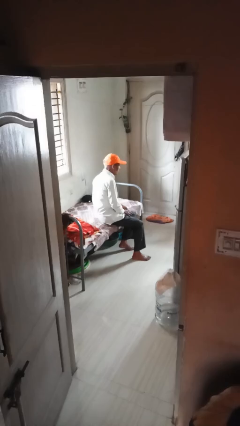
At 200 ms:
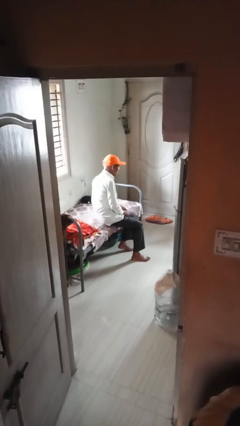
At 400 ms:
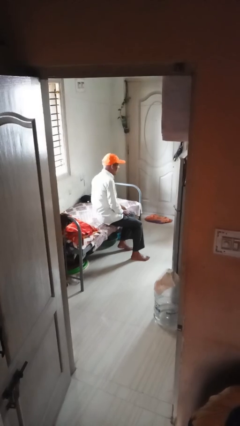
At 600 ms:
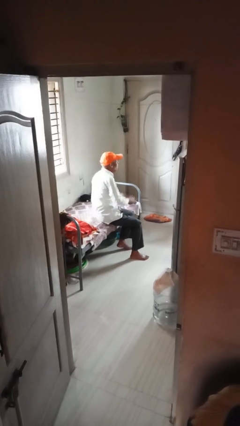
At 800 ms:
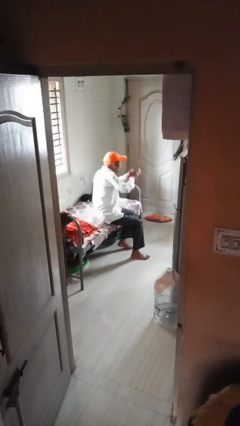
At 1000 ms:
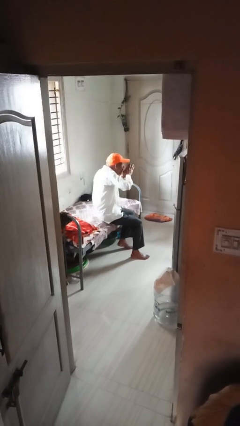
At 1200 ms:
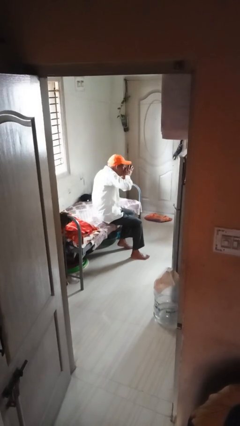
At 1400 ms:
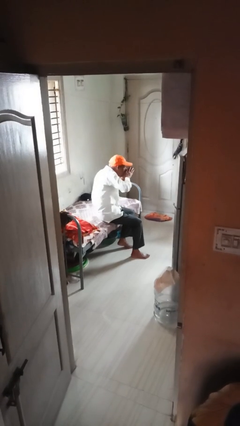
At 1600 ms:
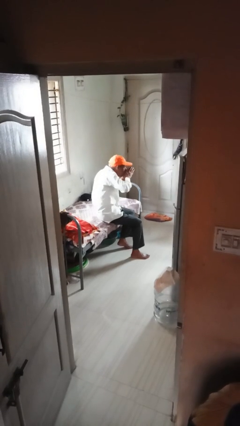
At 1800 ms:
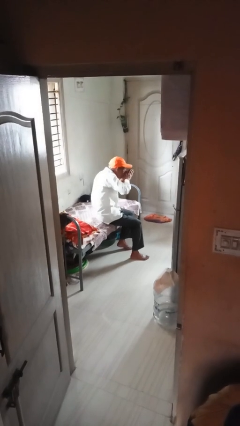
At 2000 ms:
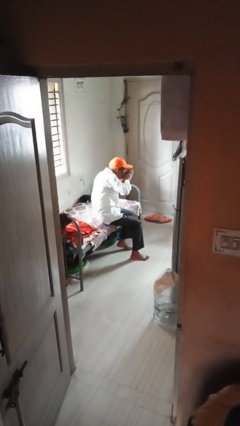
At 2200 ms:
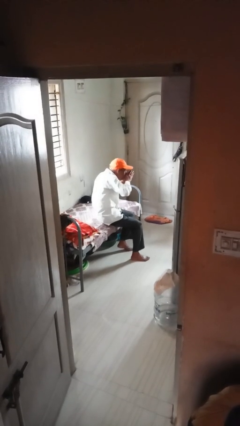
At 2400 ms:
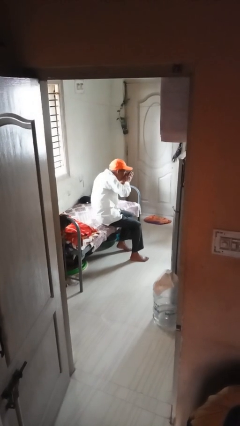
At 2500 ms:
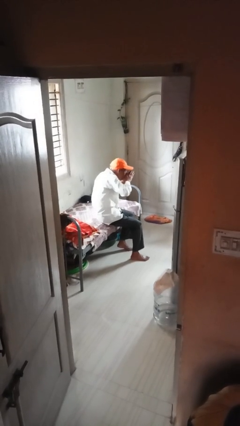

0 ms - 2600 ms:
person sneezes into hand

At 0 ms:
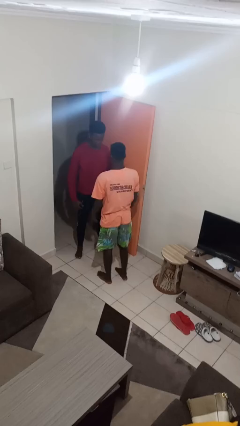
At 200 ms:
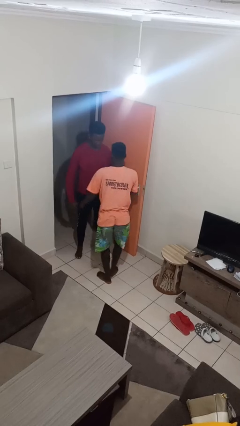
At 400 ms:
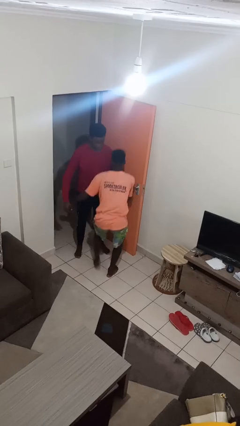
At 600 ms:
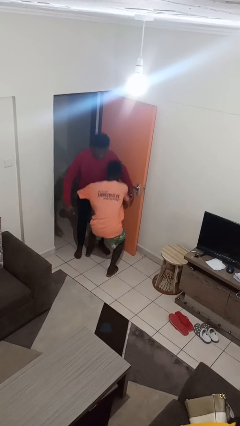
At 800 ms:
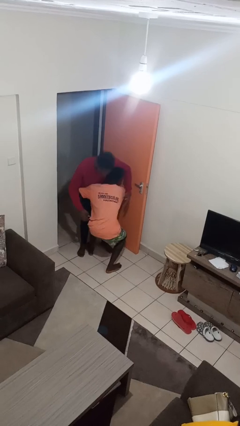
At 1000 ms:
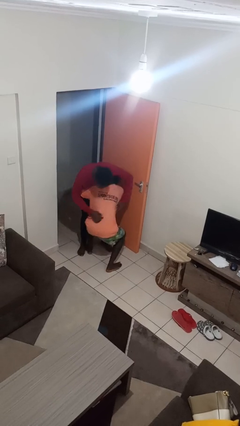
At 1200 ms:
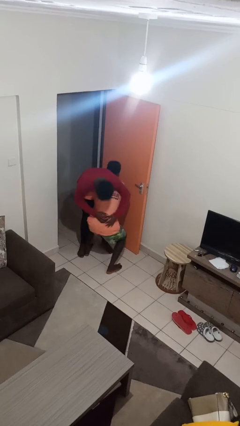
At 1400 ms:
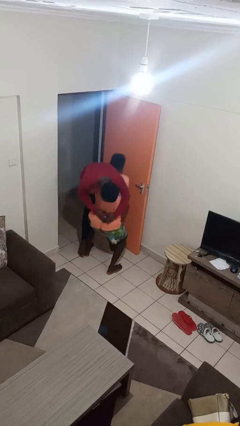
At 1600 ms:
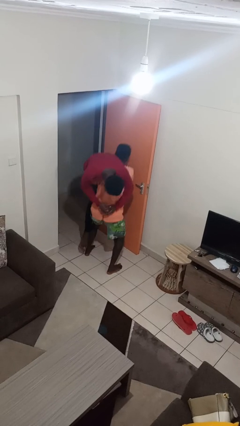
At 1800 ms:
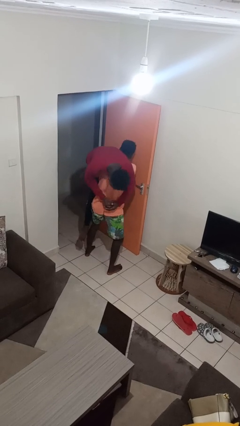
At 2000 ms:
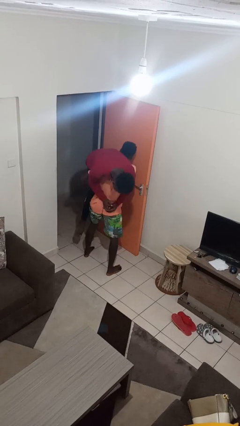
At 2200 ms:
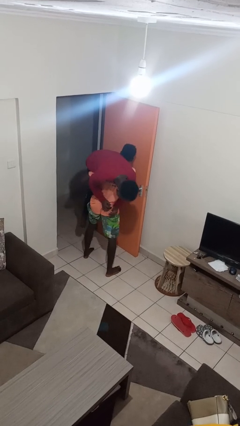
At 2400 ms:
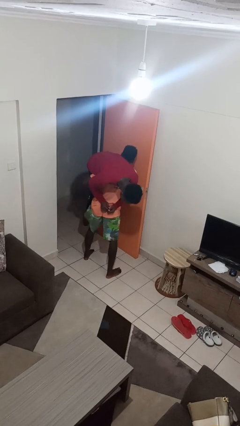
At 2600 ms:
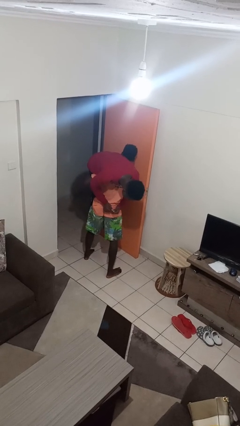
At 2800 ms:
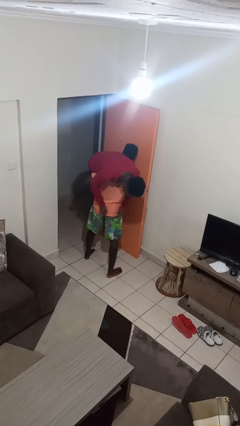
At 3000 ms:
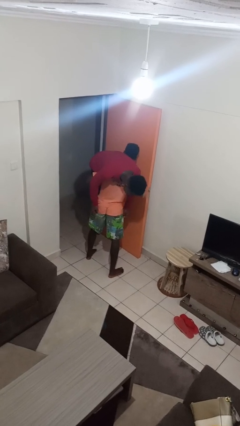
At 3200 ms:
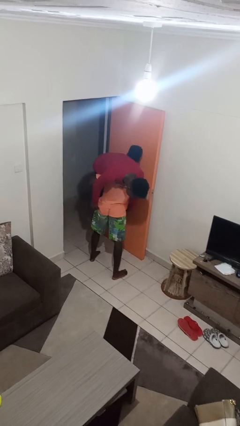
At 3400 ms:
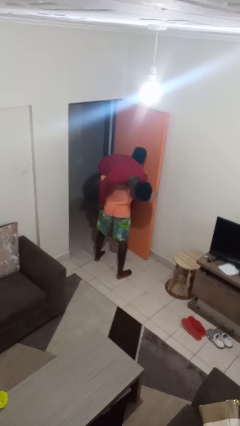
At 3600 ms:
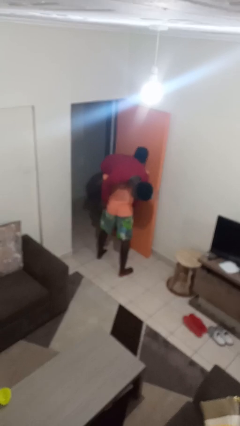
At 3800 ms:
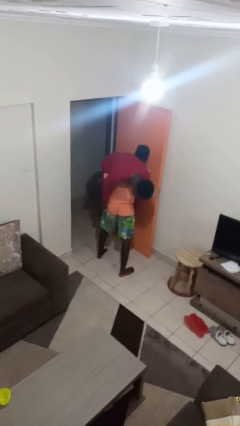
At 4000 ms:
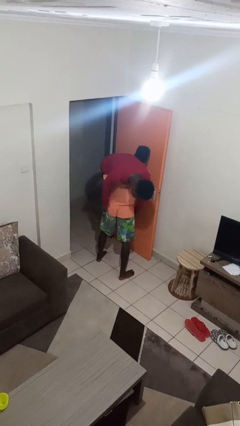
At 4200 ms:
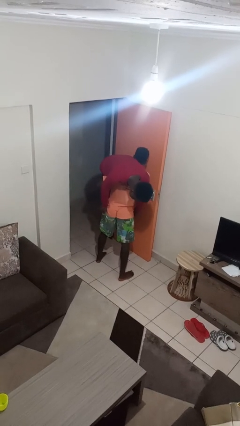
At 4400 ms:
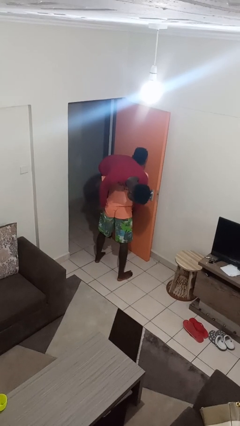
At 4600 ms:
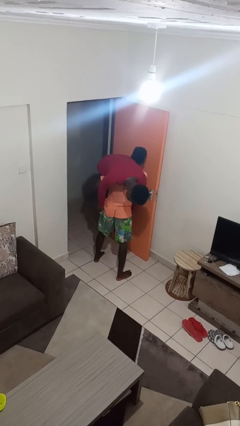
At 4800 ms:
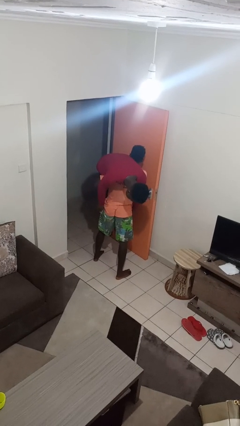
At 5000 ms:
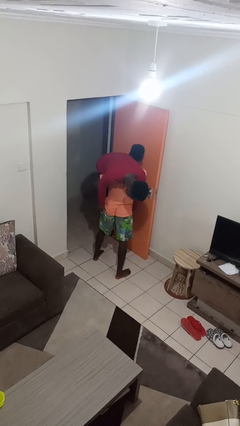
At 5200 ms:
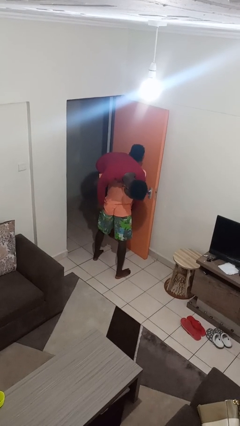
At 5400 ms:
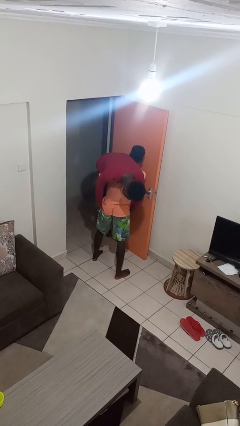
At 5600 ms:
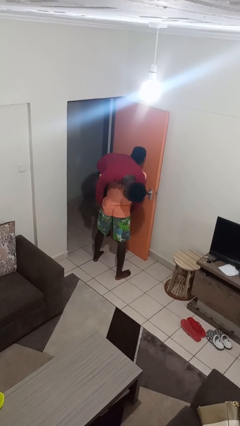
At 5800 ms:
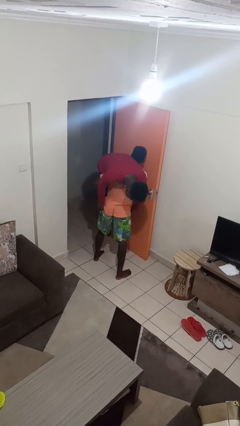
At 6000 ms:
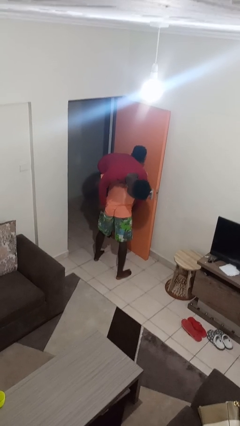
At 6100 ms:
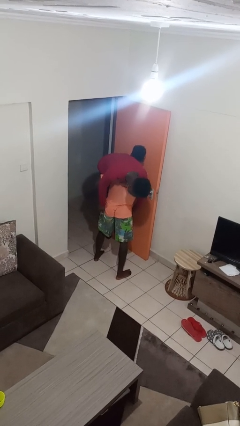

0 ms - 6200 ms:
person carries person over shoulder

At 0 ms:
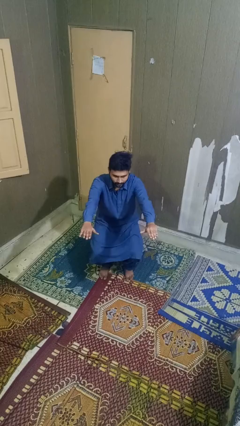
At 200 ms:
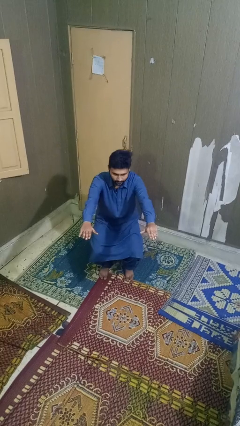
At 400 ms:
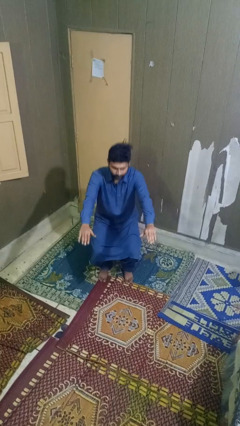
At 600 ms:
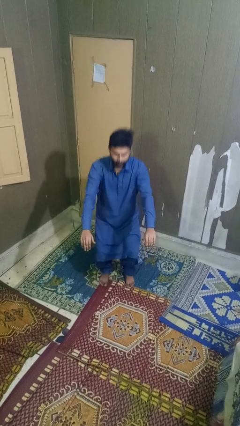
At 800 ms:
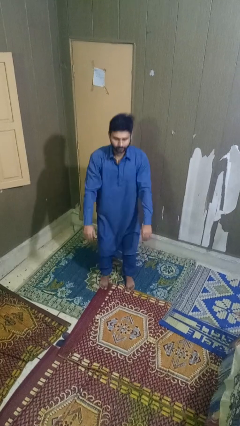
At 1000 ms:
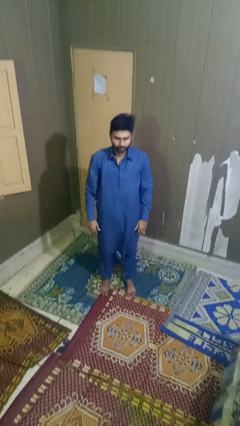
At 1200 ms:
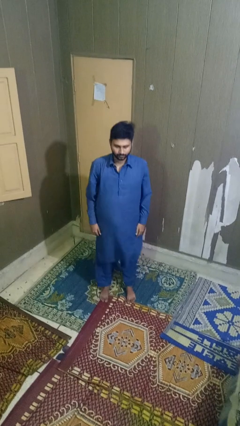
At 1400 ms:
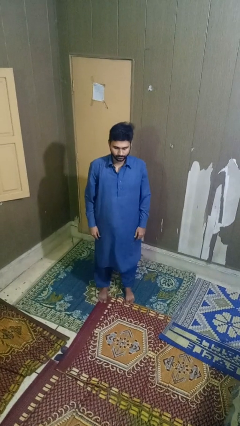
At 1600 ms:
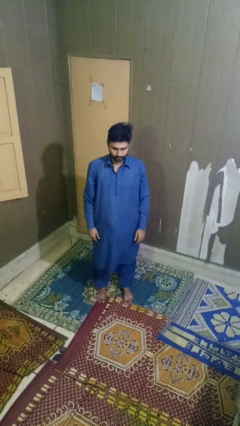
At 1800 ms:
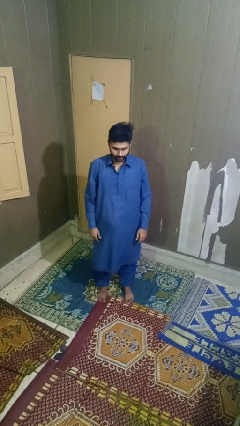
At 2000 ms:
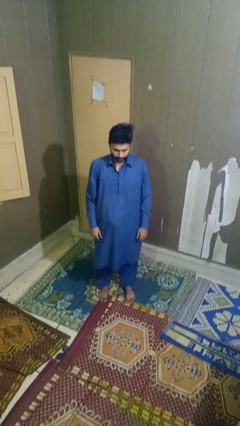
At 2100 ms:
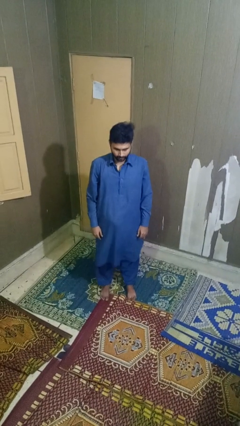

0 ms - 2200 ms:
person stands up

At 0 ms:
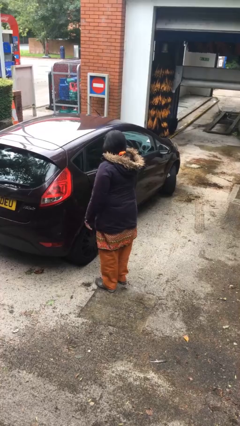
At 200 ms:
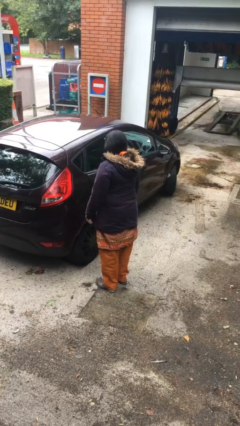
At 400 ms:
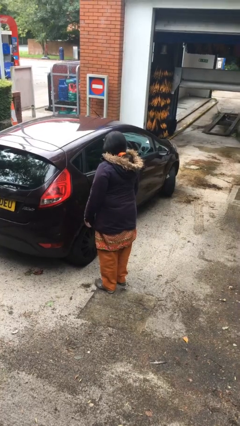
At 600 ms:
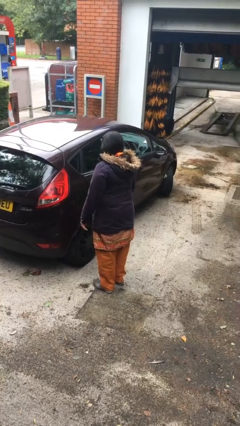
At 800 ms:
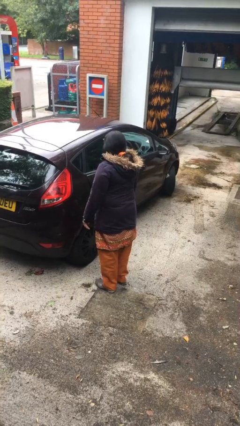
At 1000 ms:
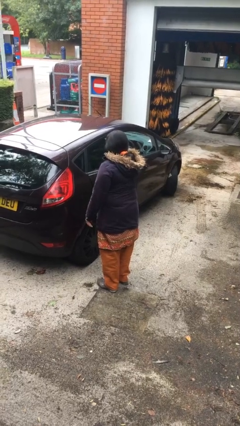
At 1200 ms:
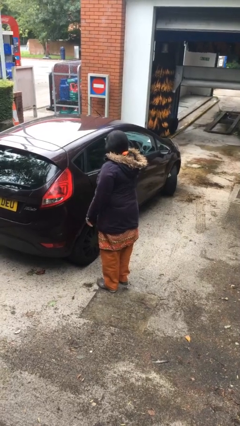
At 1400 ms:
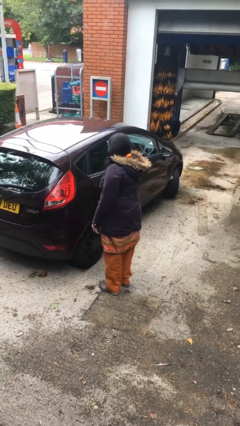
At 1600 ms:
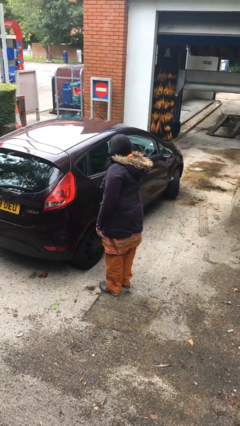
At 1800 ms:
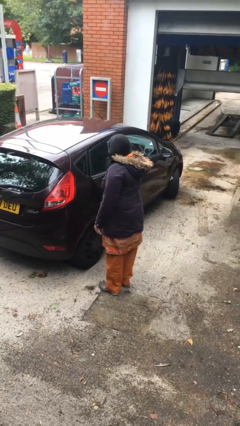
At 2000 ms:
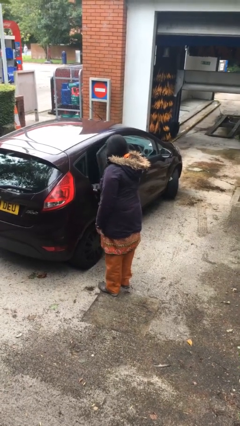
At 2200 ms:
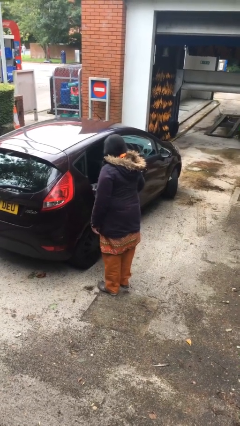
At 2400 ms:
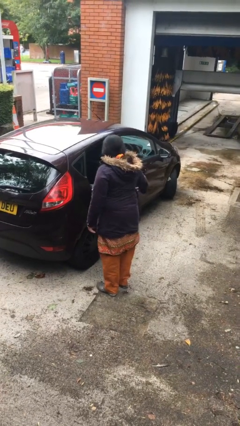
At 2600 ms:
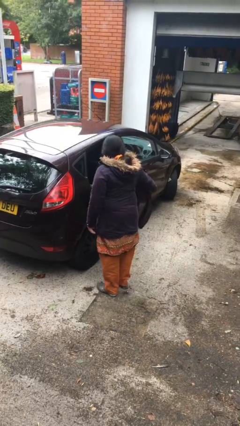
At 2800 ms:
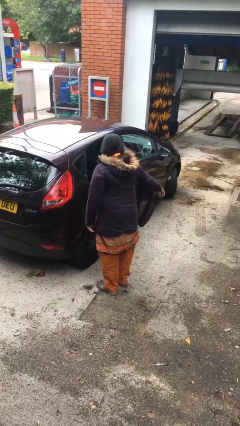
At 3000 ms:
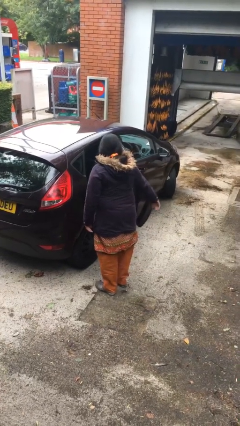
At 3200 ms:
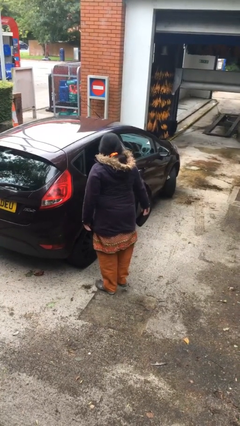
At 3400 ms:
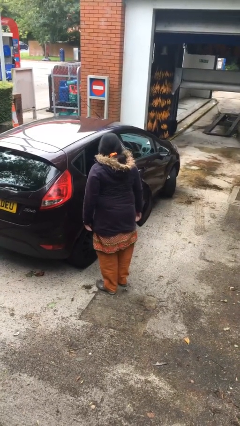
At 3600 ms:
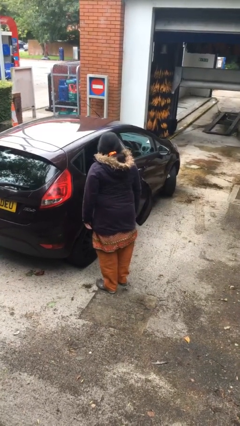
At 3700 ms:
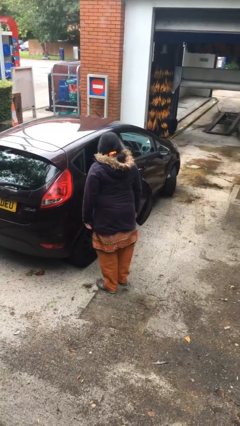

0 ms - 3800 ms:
person opens car door

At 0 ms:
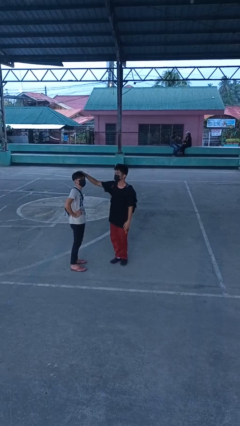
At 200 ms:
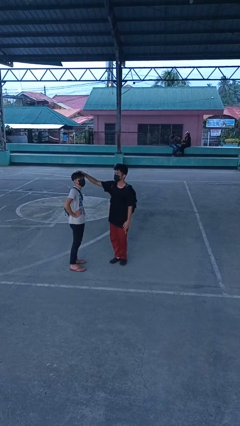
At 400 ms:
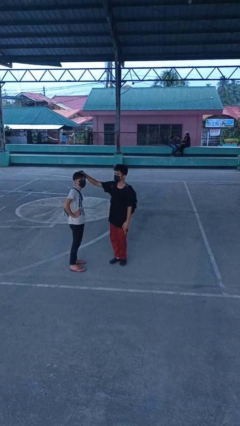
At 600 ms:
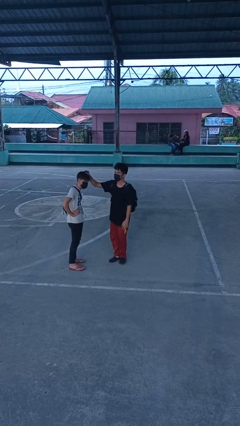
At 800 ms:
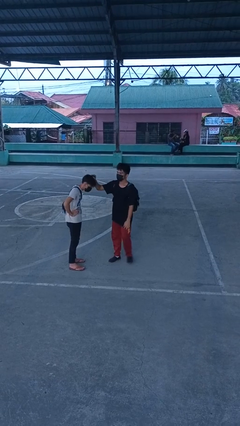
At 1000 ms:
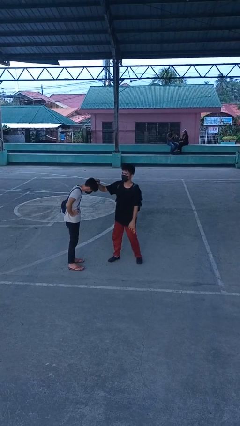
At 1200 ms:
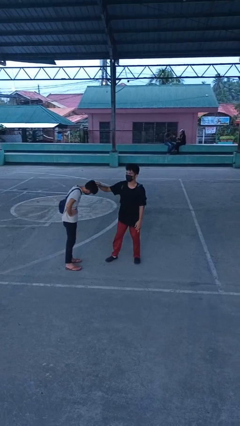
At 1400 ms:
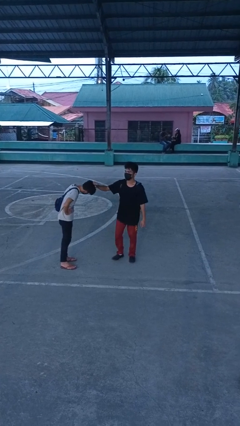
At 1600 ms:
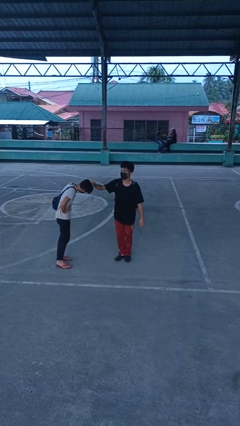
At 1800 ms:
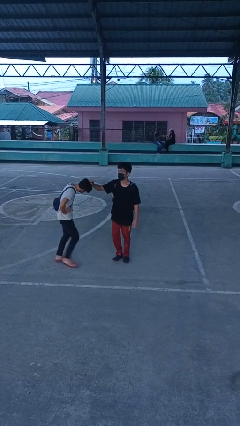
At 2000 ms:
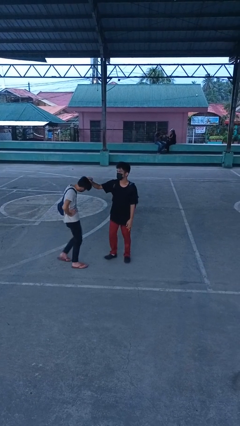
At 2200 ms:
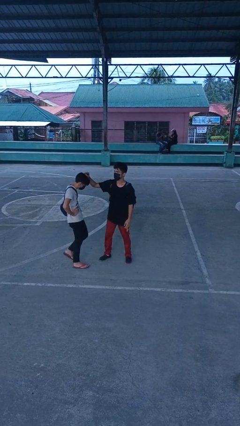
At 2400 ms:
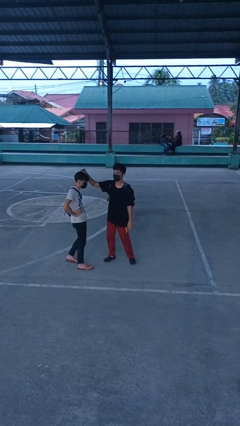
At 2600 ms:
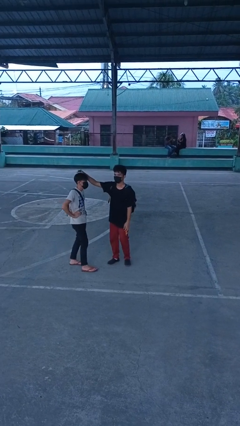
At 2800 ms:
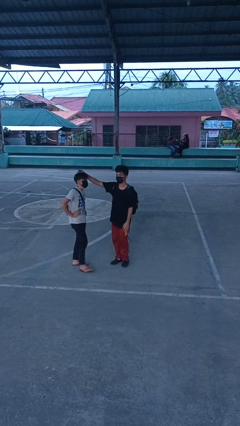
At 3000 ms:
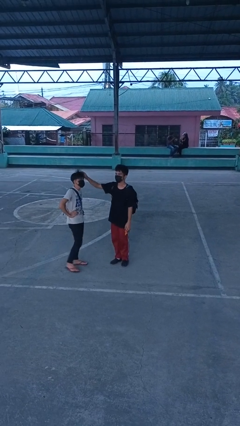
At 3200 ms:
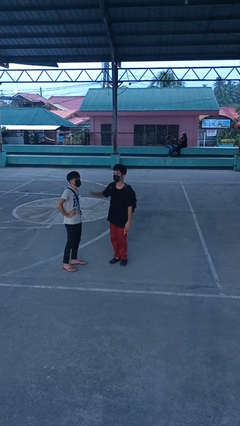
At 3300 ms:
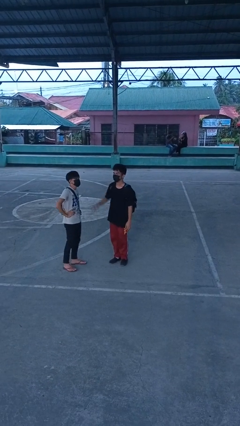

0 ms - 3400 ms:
person grabs person by hair
